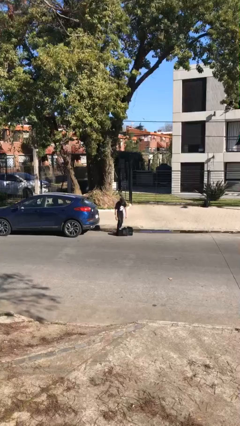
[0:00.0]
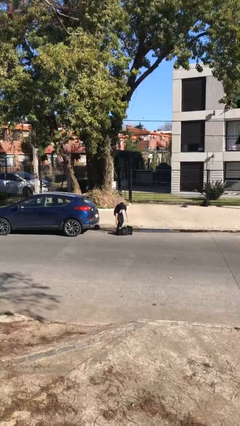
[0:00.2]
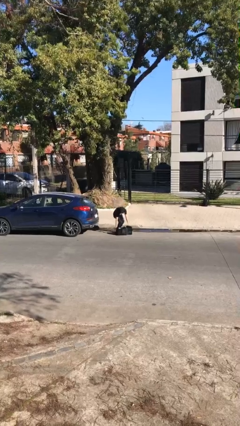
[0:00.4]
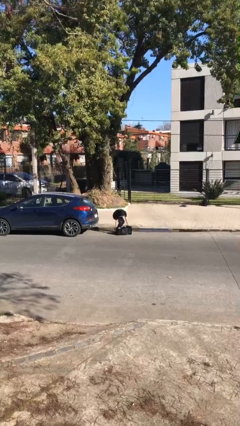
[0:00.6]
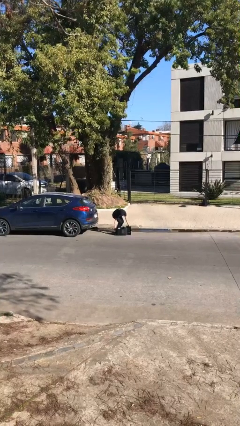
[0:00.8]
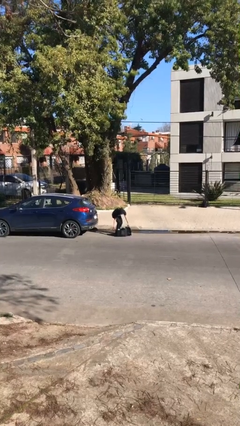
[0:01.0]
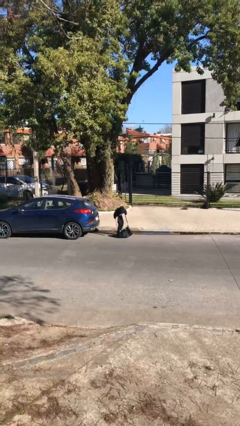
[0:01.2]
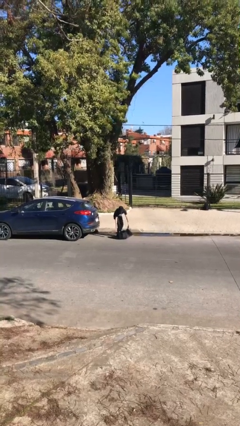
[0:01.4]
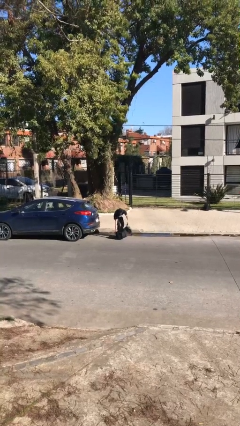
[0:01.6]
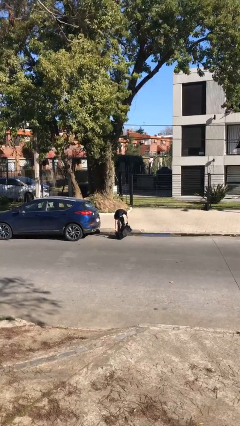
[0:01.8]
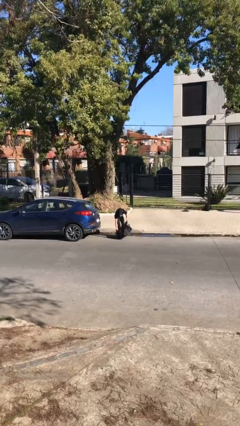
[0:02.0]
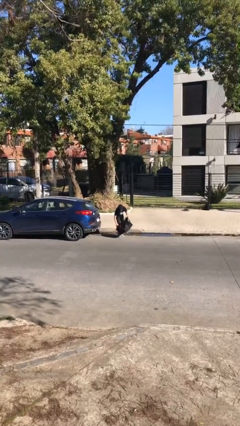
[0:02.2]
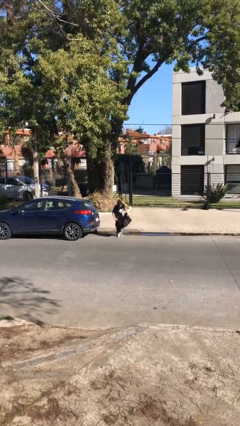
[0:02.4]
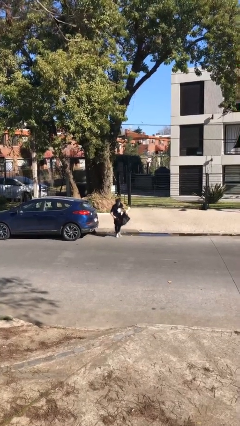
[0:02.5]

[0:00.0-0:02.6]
person picks up object from floor

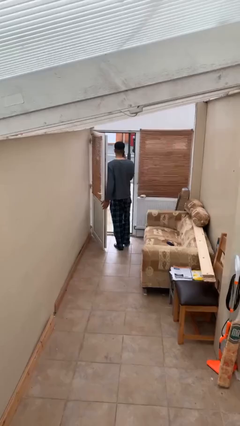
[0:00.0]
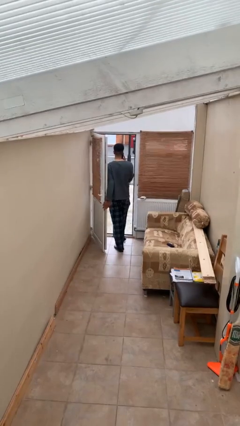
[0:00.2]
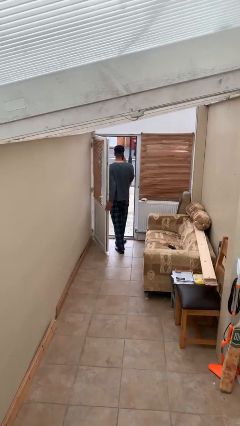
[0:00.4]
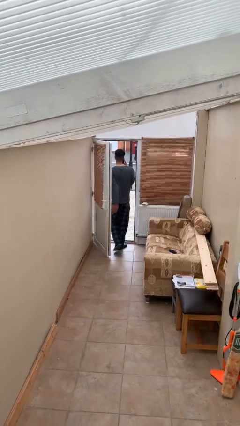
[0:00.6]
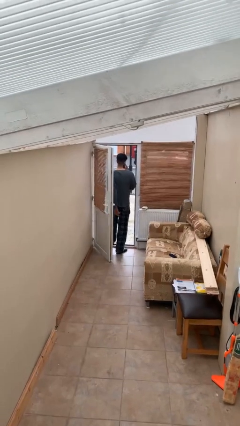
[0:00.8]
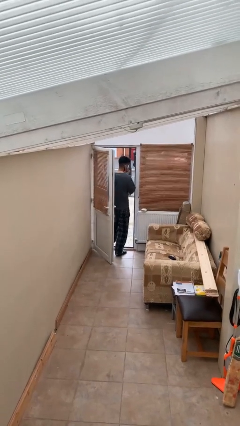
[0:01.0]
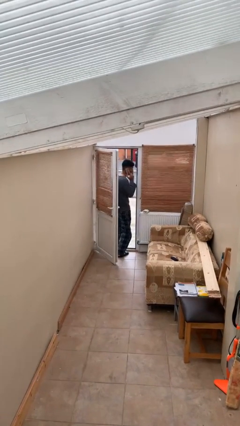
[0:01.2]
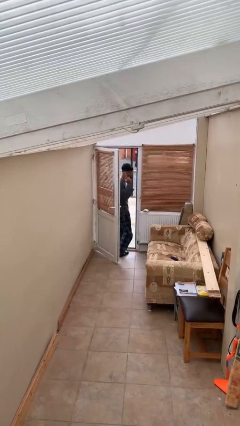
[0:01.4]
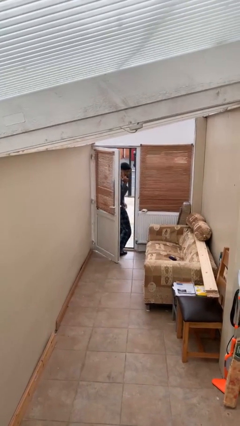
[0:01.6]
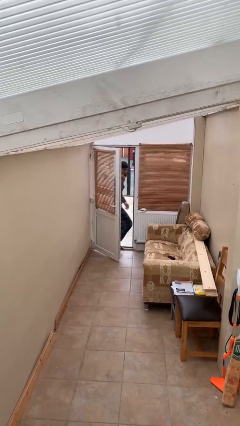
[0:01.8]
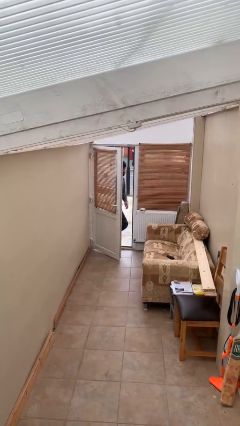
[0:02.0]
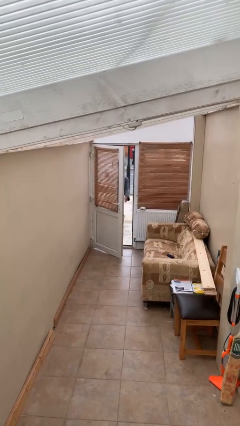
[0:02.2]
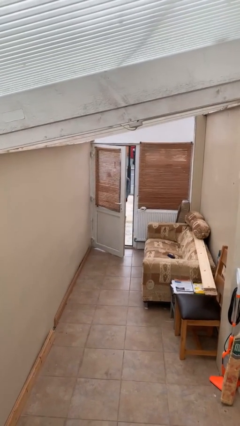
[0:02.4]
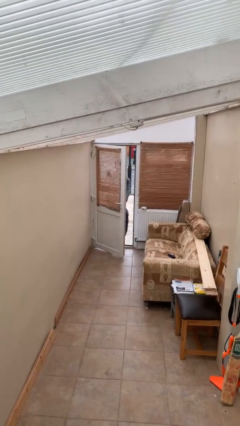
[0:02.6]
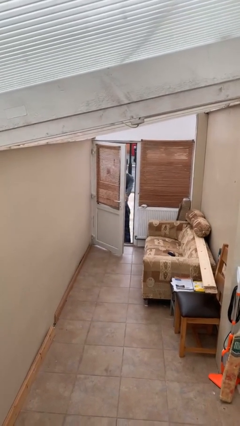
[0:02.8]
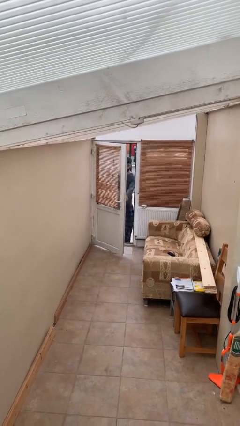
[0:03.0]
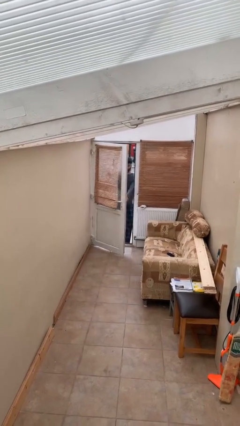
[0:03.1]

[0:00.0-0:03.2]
person exits scene through structure

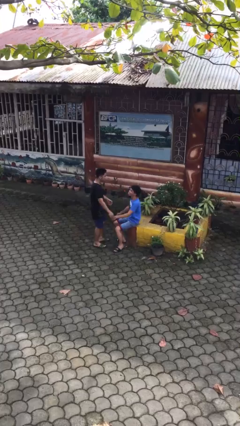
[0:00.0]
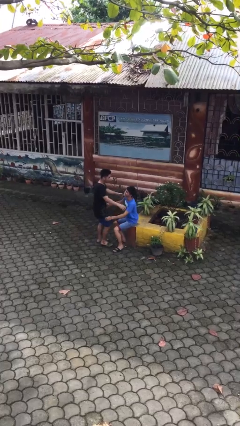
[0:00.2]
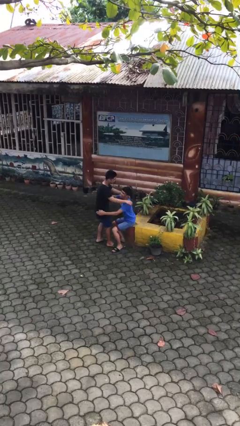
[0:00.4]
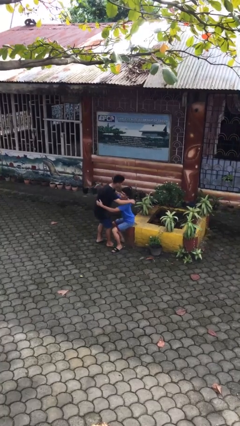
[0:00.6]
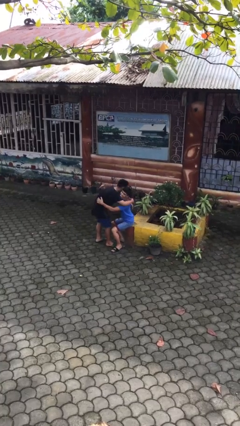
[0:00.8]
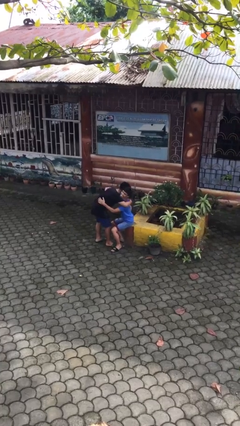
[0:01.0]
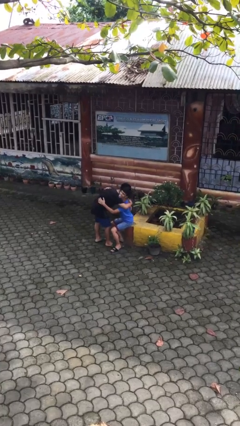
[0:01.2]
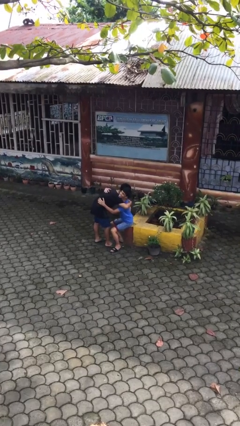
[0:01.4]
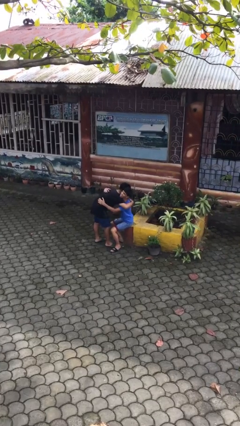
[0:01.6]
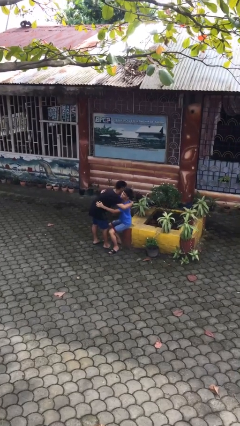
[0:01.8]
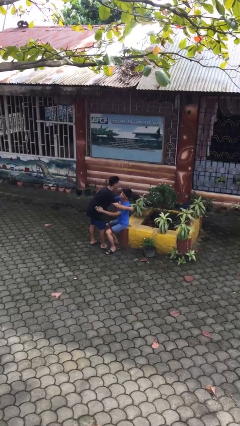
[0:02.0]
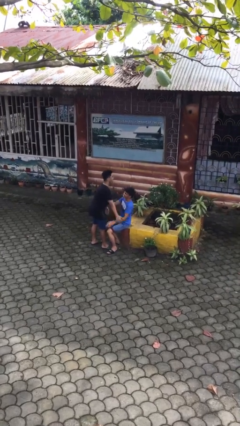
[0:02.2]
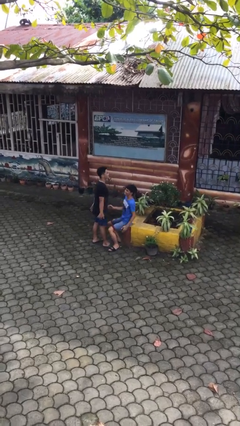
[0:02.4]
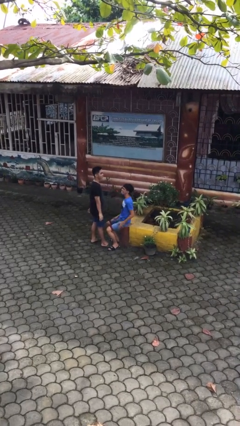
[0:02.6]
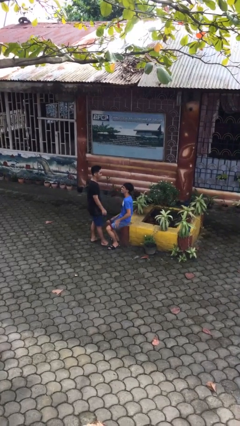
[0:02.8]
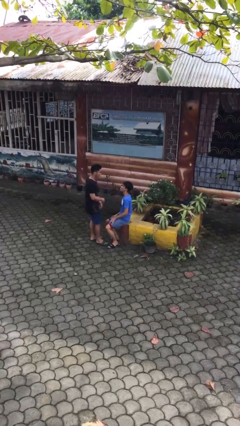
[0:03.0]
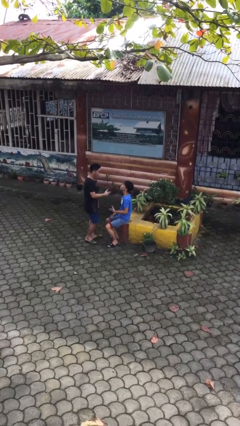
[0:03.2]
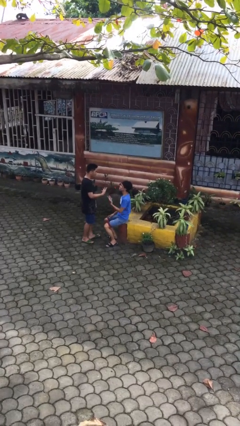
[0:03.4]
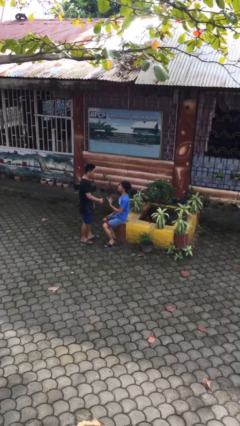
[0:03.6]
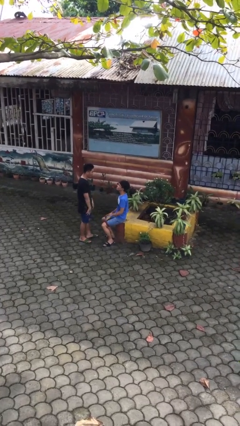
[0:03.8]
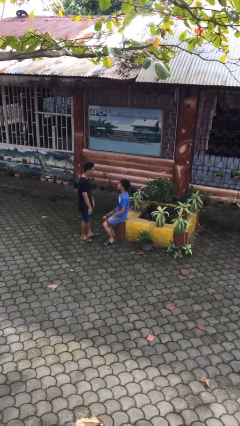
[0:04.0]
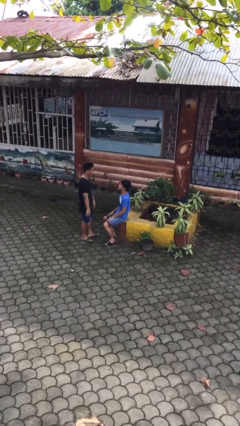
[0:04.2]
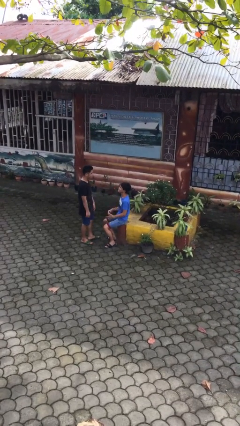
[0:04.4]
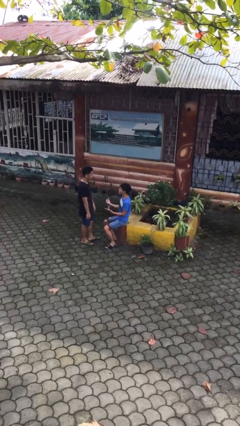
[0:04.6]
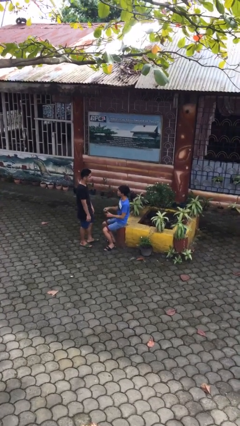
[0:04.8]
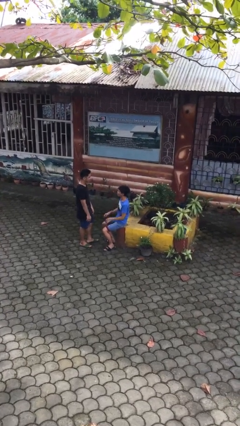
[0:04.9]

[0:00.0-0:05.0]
person embraces person

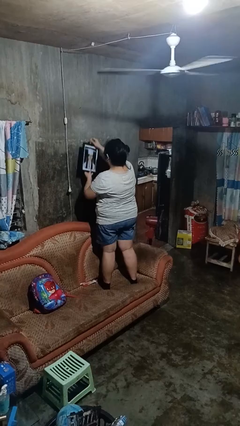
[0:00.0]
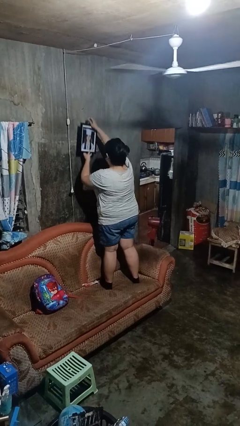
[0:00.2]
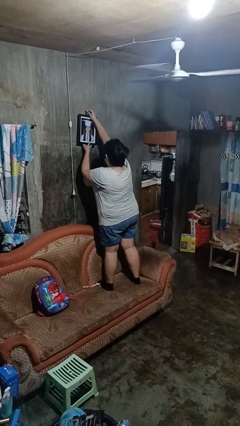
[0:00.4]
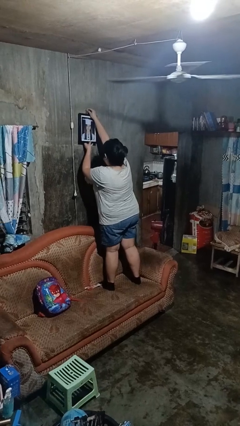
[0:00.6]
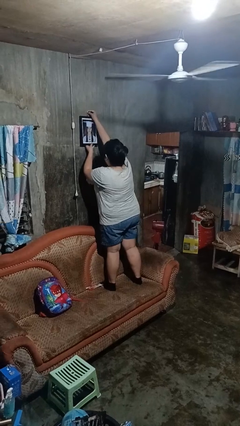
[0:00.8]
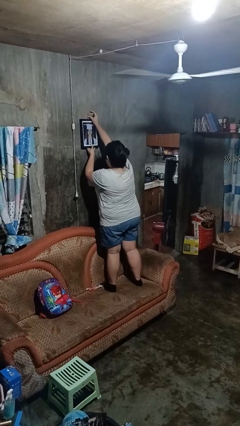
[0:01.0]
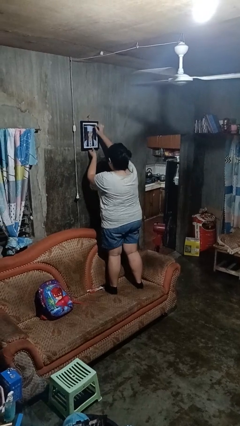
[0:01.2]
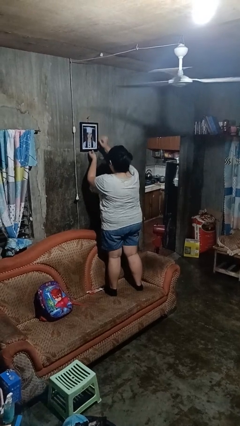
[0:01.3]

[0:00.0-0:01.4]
person puts up picture frame

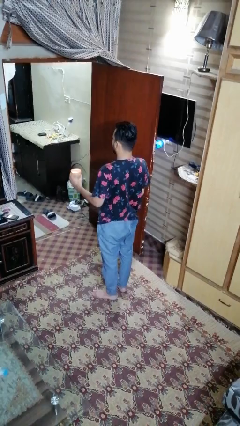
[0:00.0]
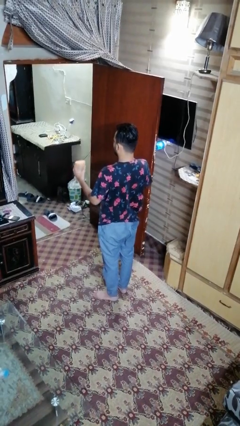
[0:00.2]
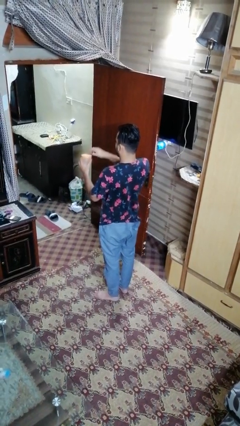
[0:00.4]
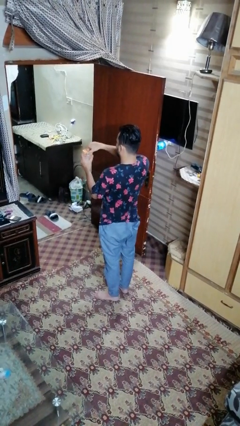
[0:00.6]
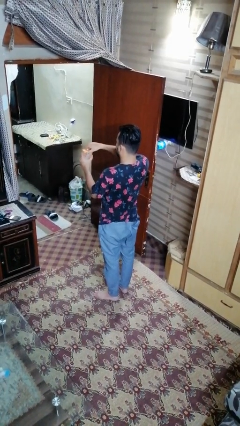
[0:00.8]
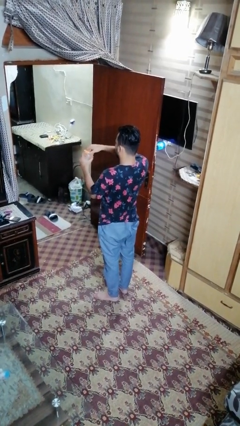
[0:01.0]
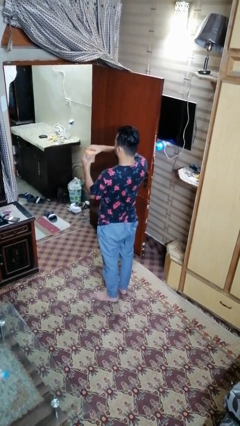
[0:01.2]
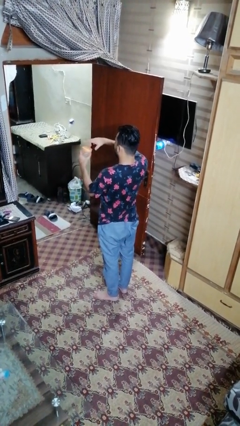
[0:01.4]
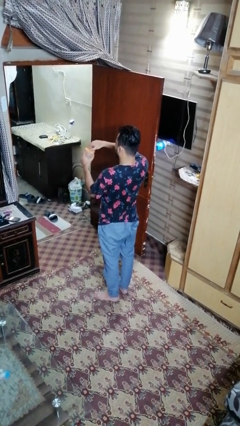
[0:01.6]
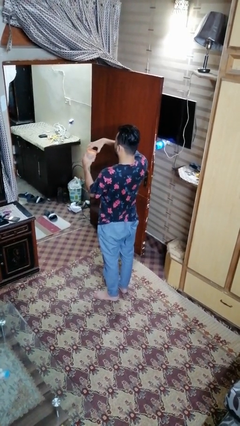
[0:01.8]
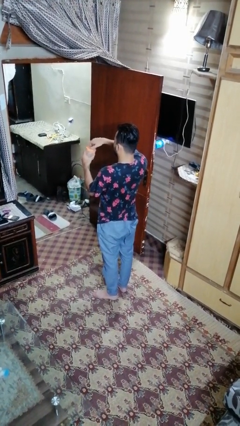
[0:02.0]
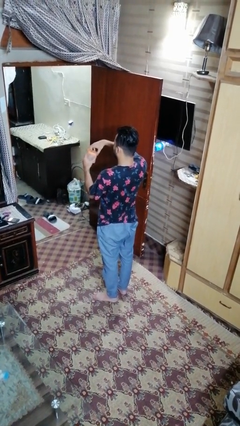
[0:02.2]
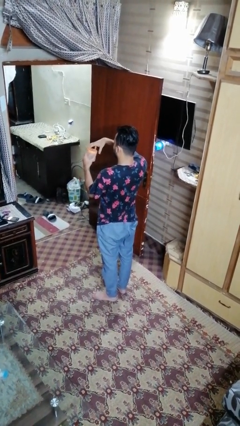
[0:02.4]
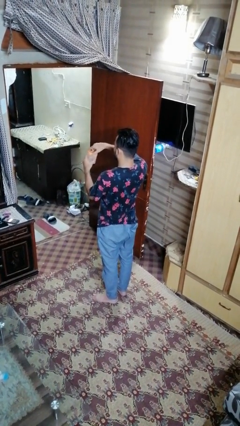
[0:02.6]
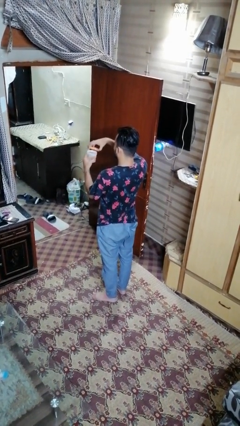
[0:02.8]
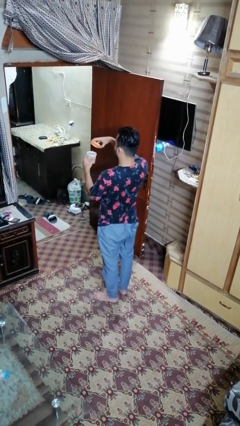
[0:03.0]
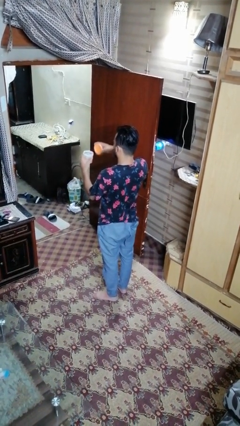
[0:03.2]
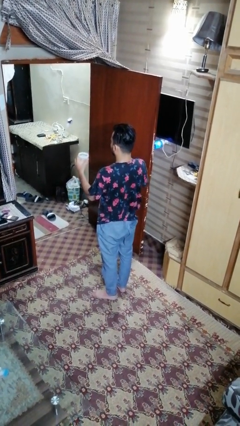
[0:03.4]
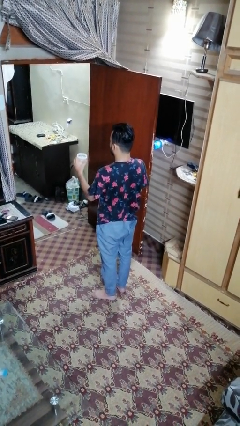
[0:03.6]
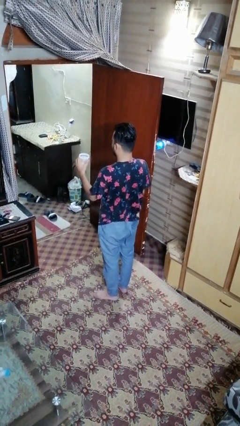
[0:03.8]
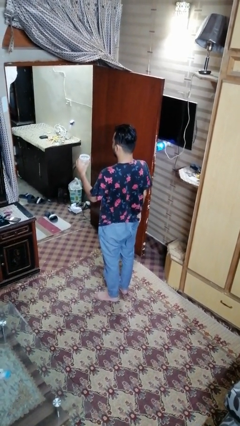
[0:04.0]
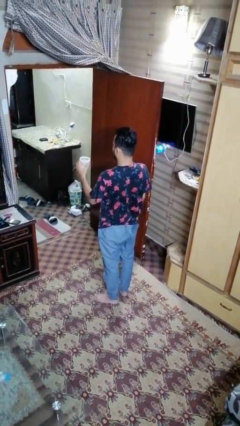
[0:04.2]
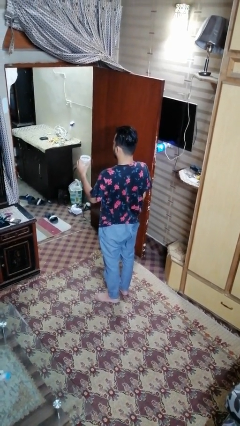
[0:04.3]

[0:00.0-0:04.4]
person opens jar

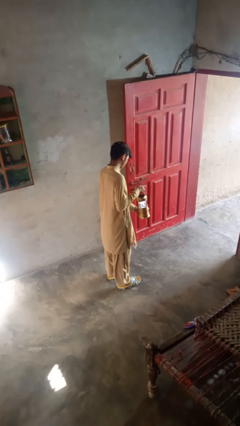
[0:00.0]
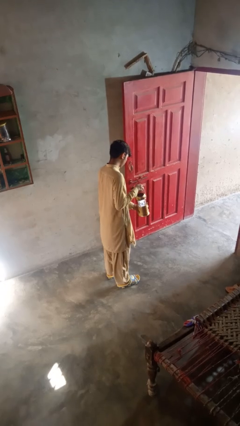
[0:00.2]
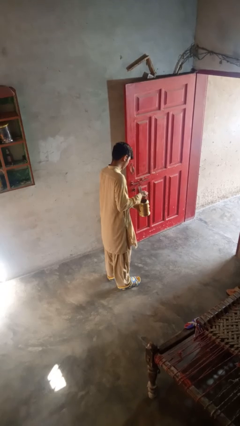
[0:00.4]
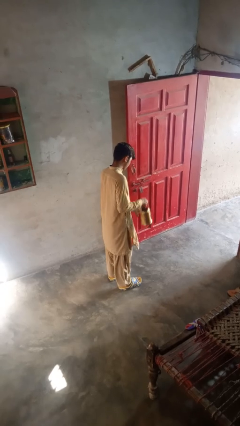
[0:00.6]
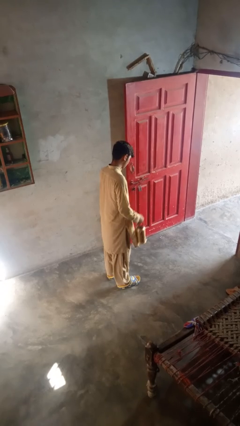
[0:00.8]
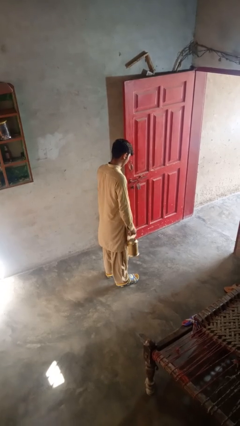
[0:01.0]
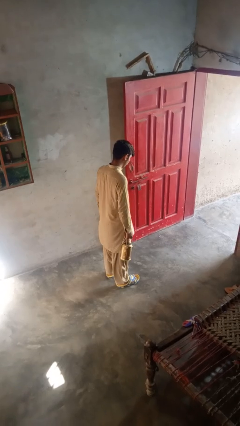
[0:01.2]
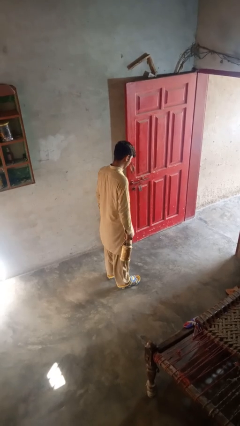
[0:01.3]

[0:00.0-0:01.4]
person turns off lamp
